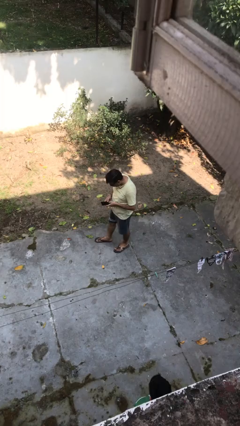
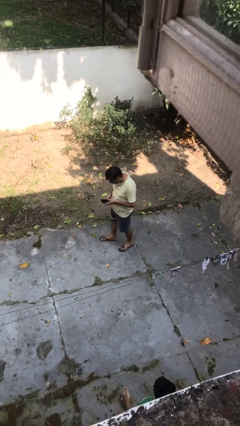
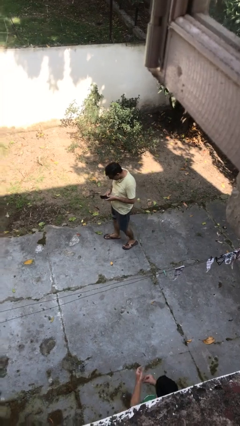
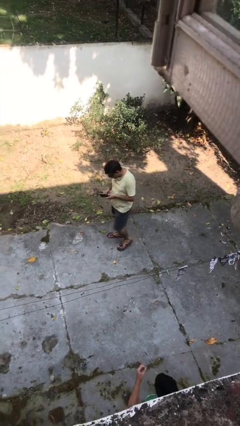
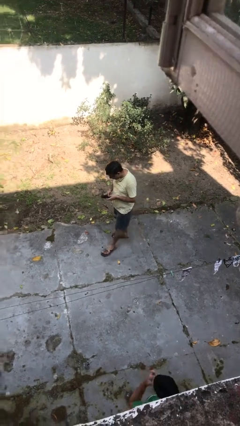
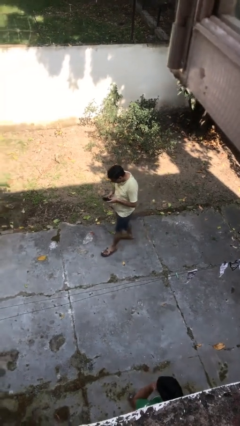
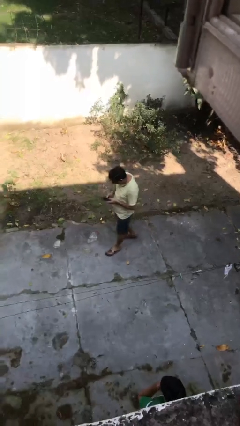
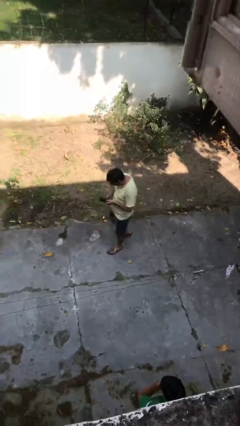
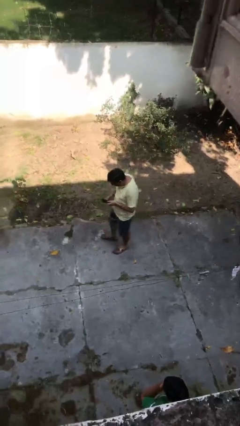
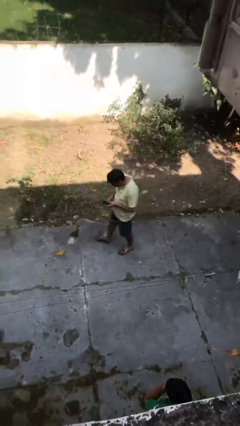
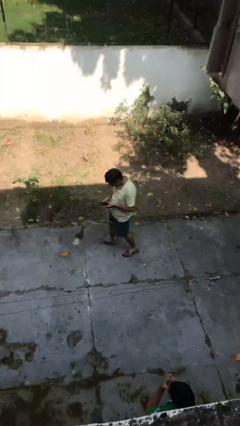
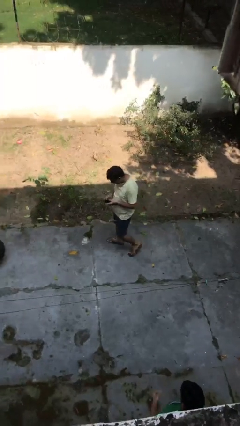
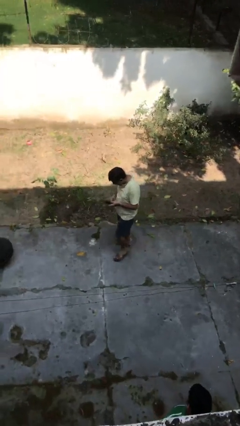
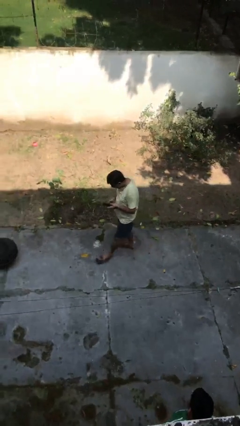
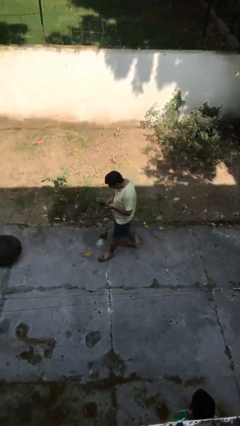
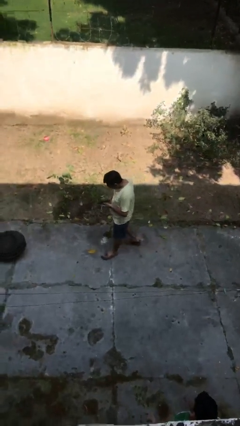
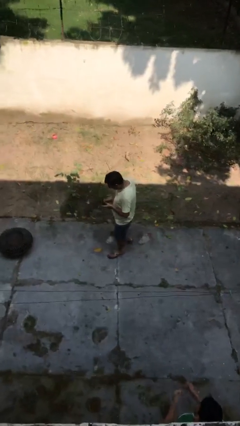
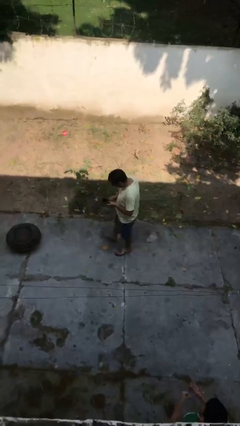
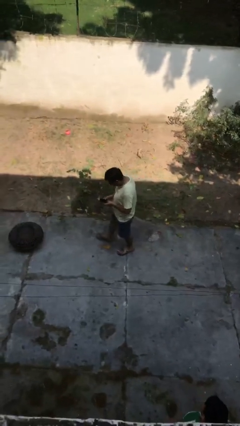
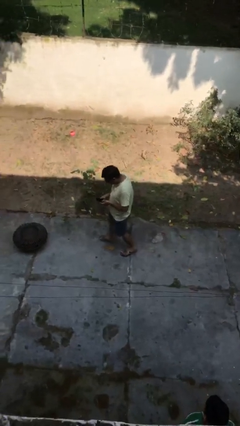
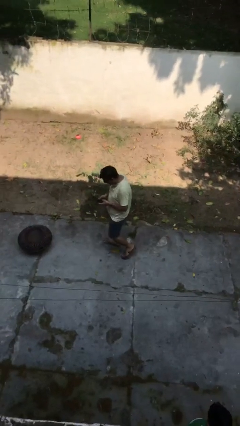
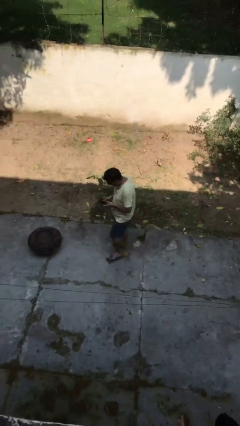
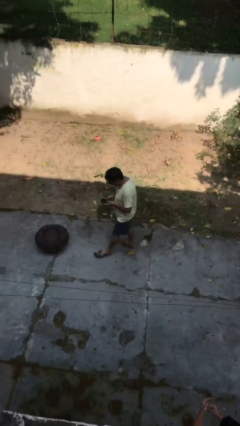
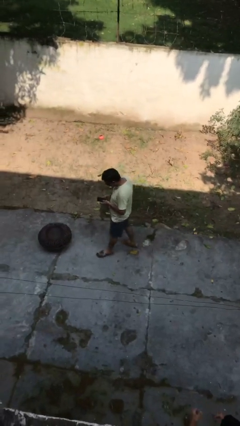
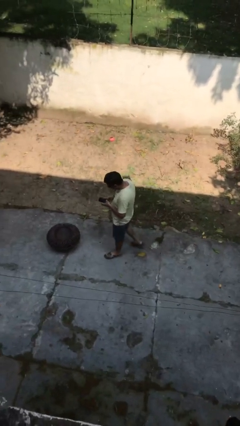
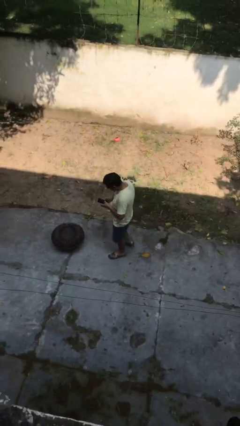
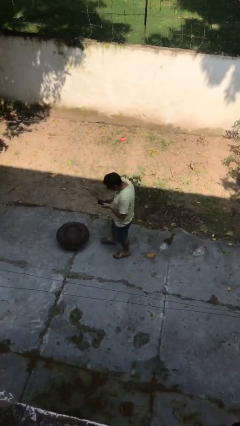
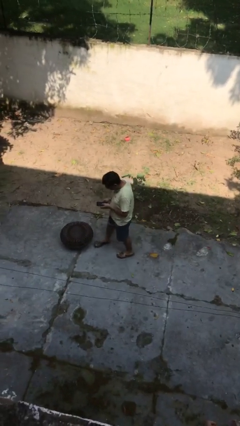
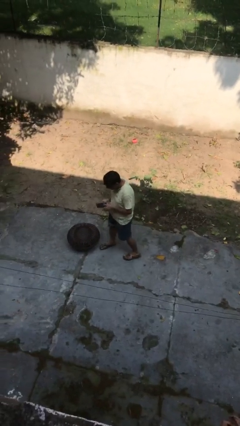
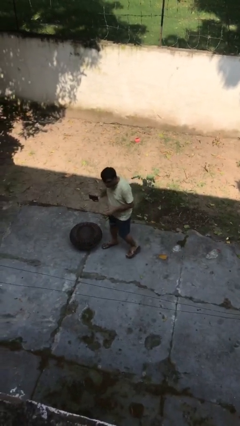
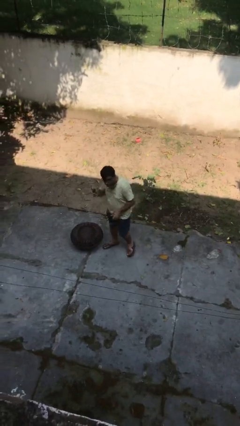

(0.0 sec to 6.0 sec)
person texts on phone

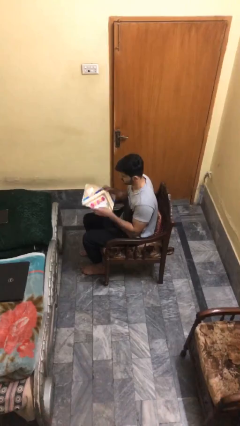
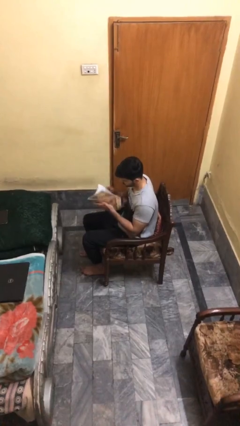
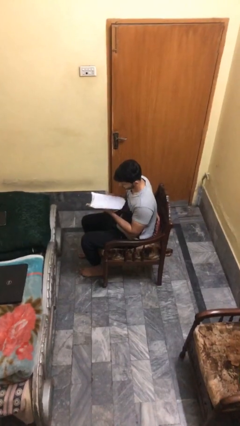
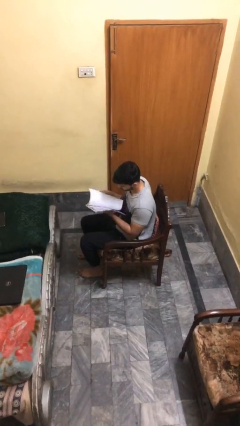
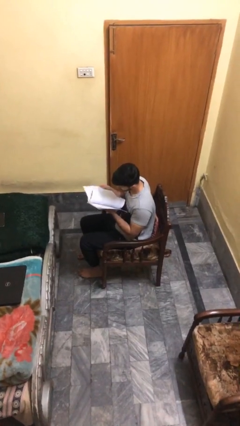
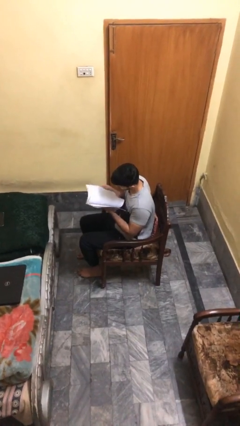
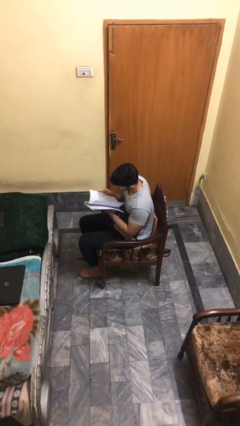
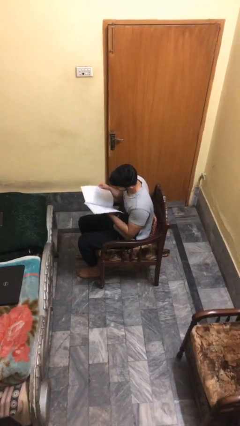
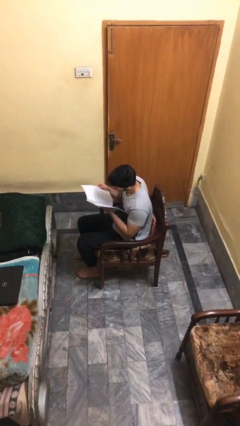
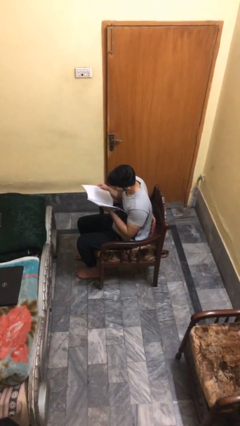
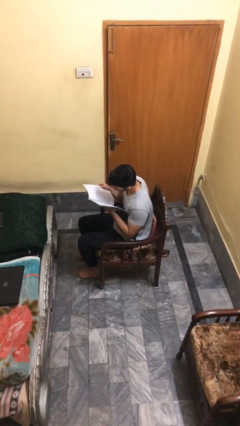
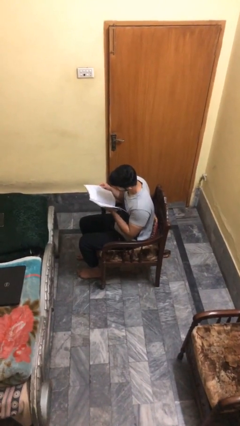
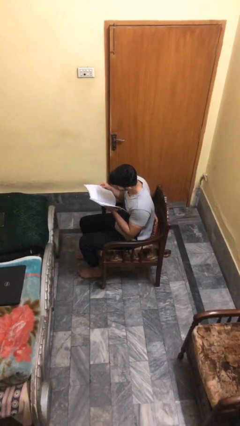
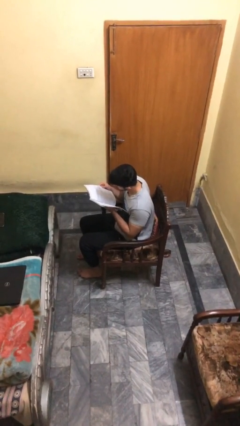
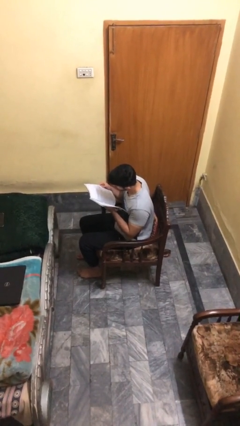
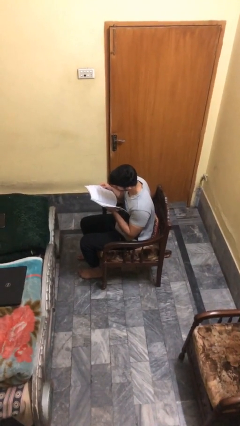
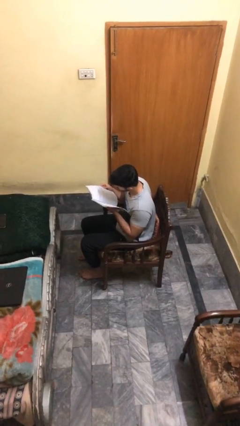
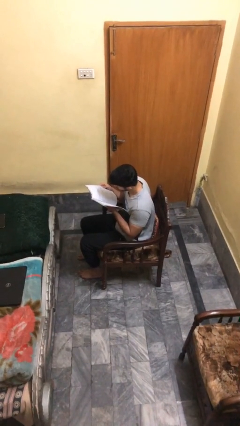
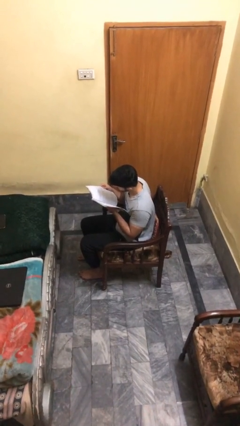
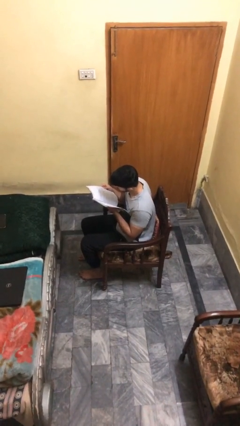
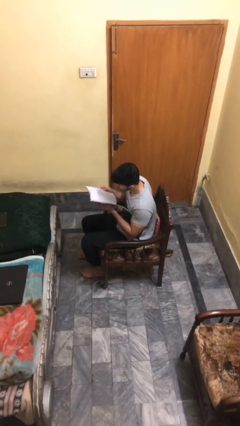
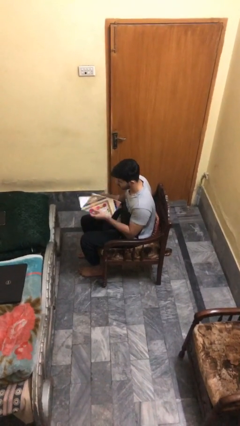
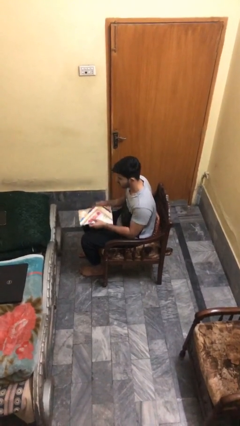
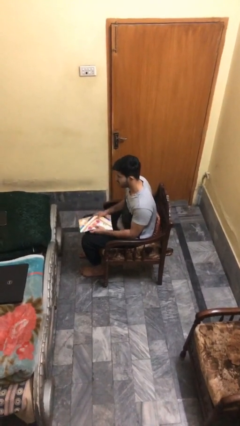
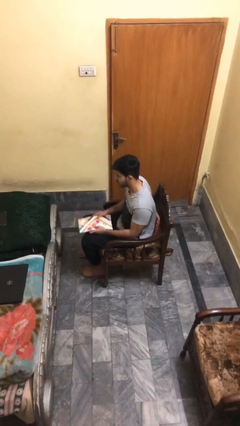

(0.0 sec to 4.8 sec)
person reads document

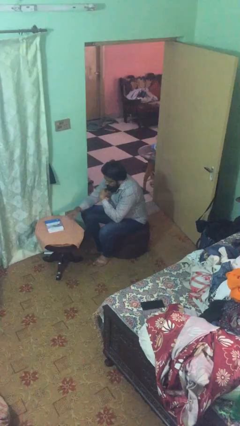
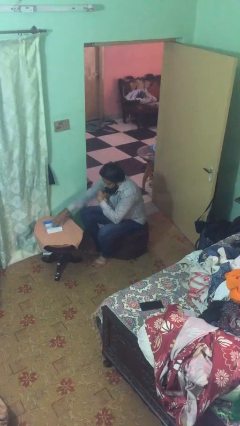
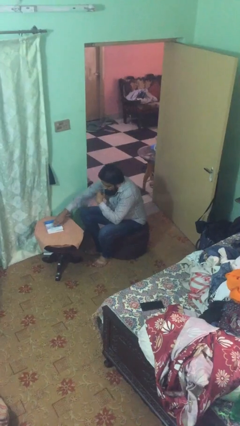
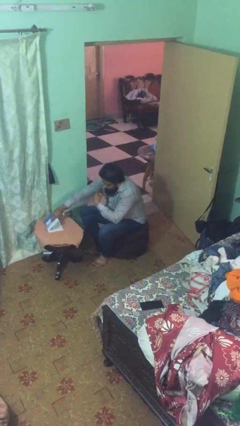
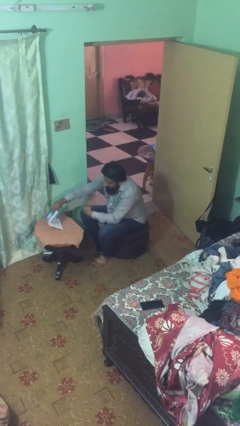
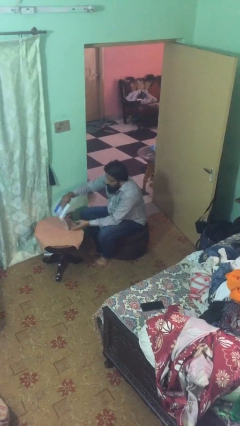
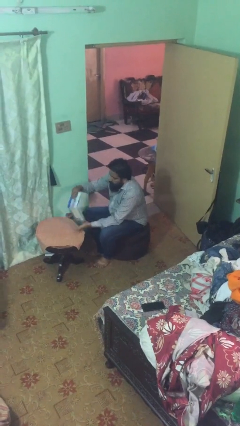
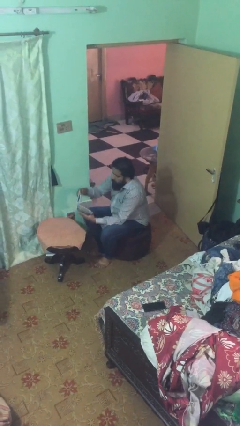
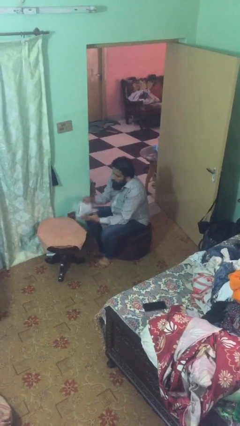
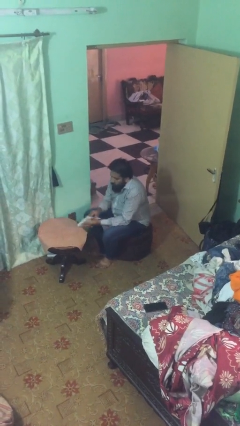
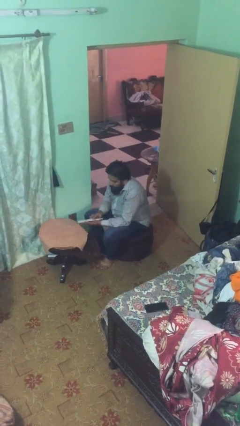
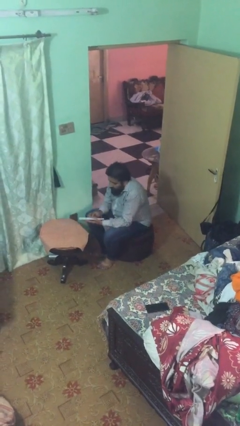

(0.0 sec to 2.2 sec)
person picks up object from table

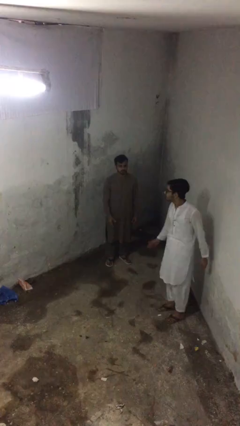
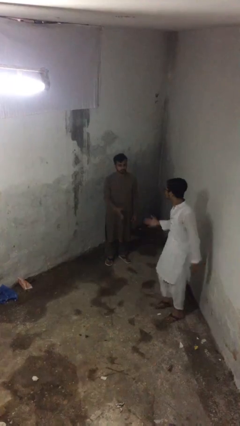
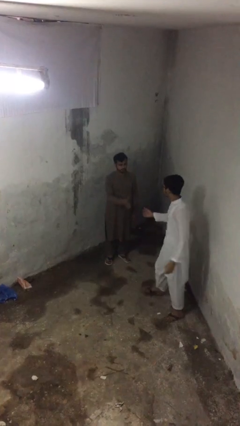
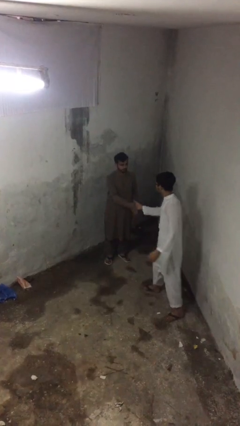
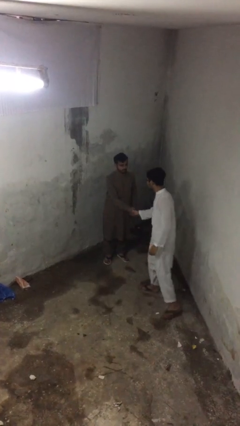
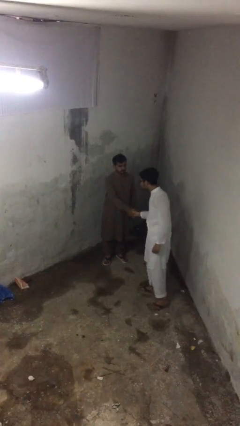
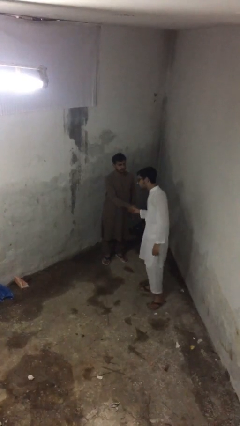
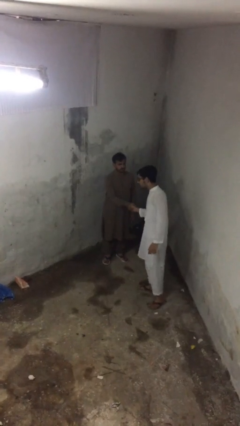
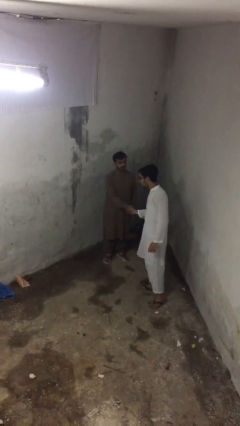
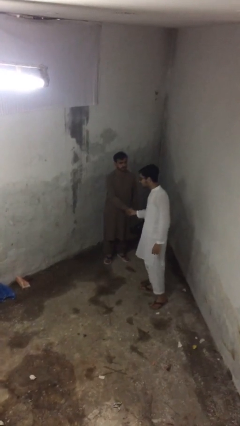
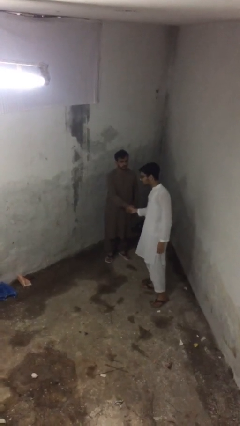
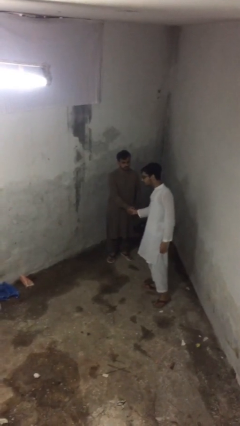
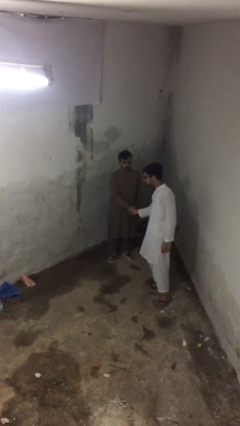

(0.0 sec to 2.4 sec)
person shakes hand

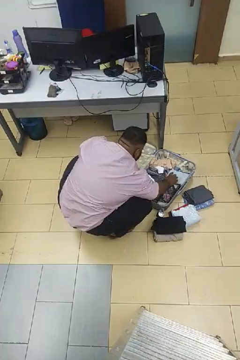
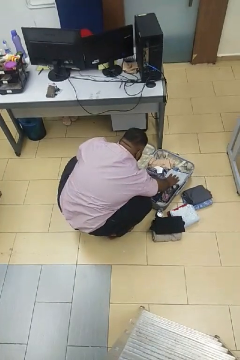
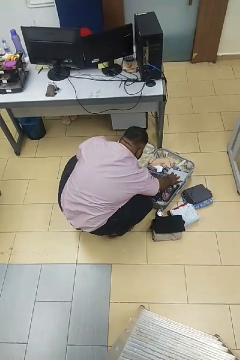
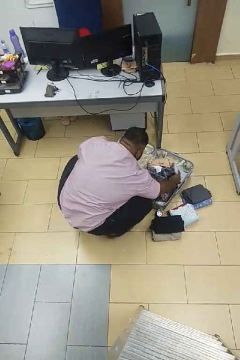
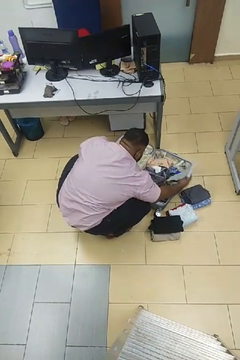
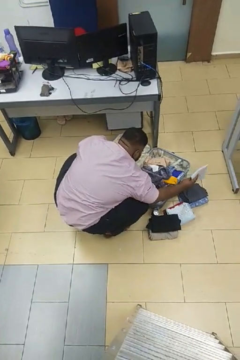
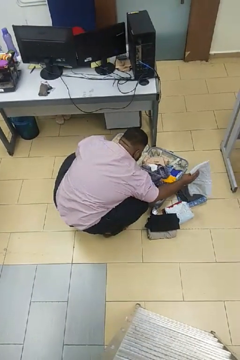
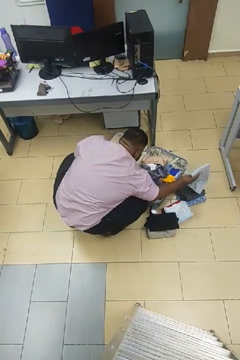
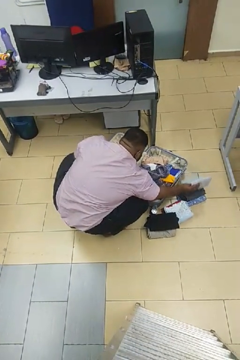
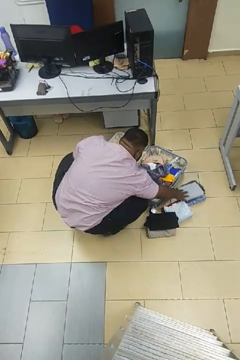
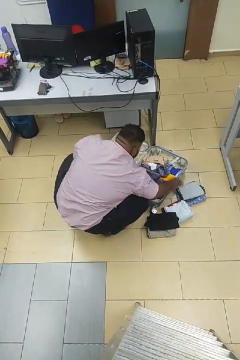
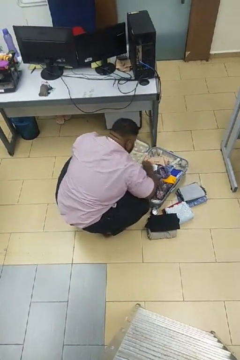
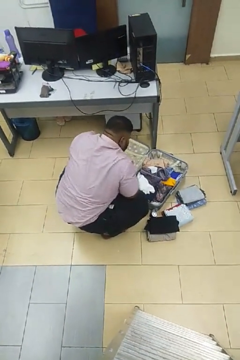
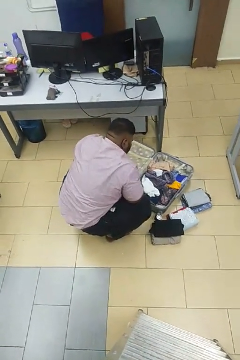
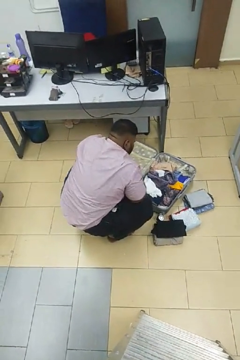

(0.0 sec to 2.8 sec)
person unloads clothes from suitcase
